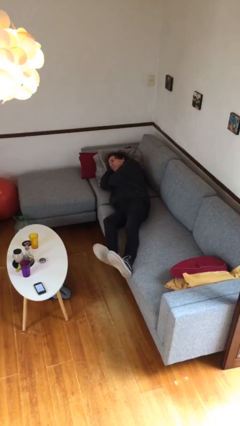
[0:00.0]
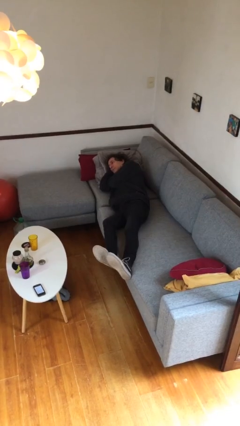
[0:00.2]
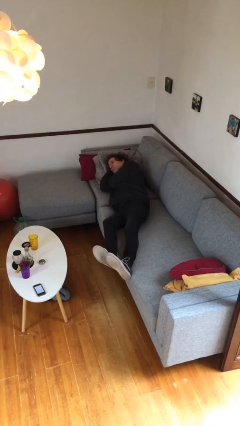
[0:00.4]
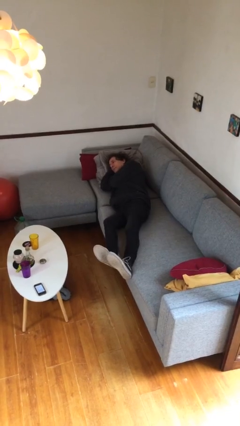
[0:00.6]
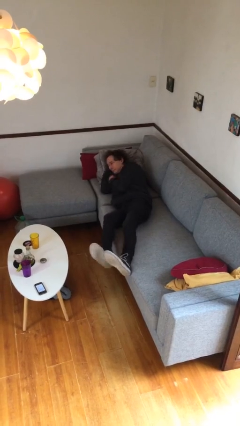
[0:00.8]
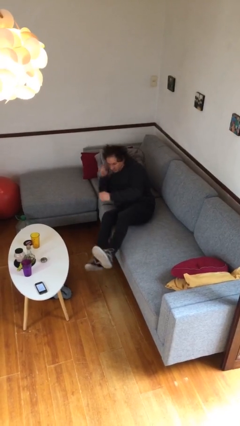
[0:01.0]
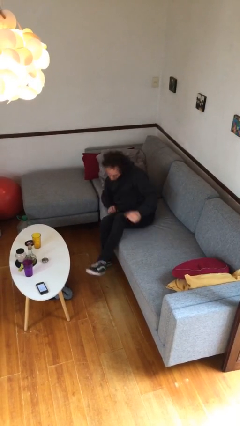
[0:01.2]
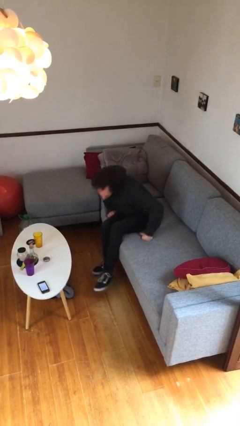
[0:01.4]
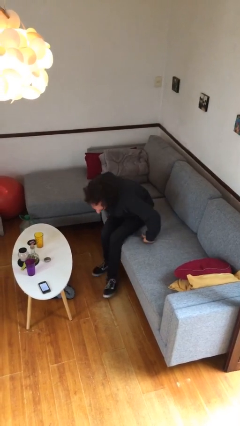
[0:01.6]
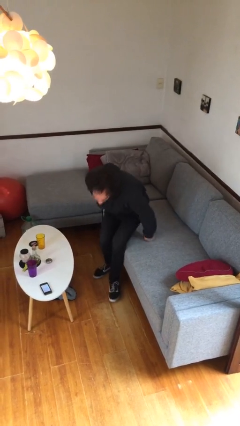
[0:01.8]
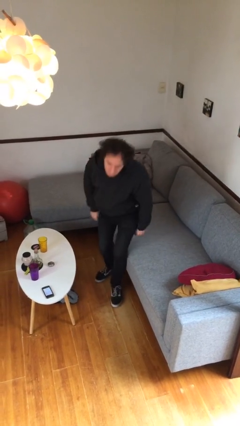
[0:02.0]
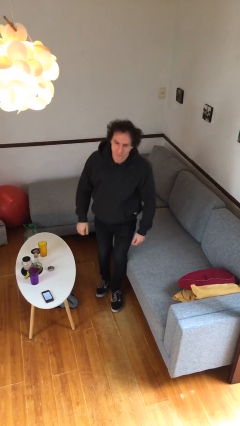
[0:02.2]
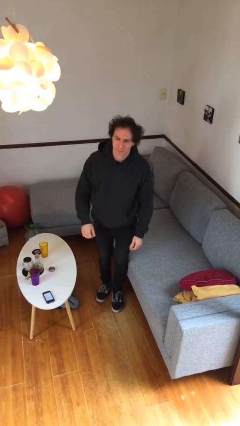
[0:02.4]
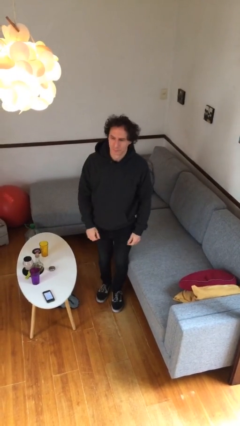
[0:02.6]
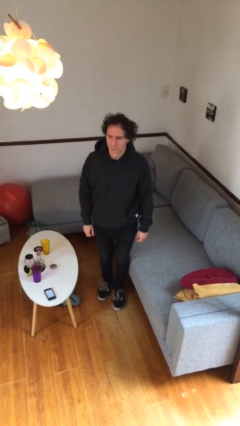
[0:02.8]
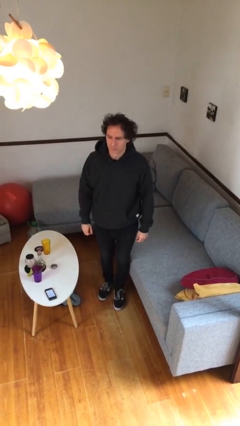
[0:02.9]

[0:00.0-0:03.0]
person stands up

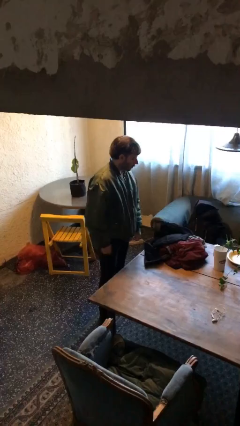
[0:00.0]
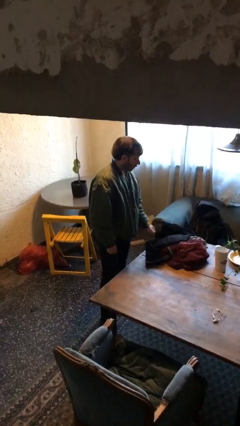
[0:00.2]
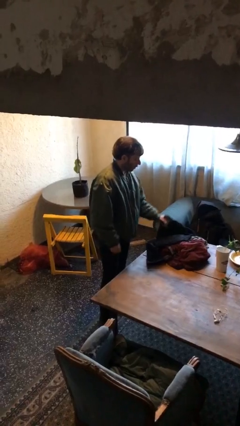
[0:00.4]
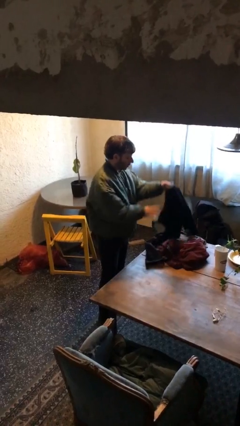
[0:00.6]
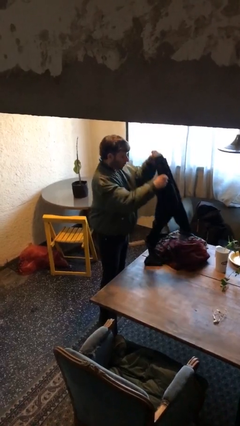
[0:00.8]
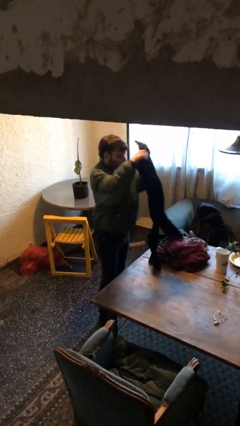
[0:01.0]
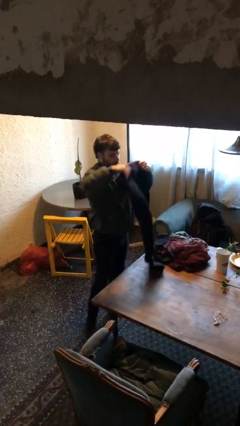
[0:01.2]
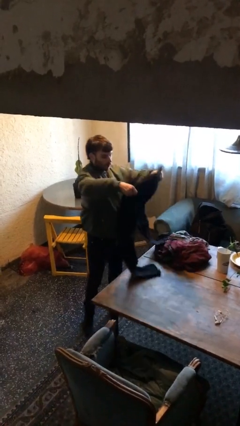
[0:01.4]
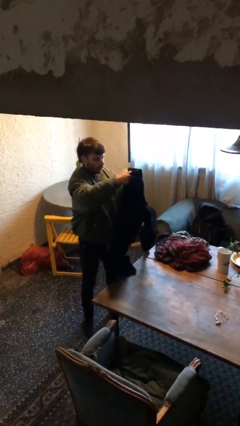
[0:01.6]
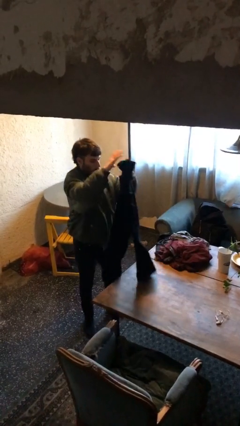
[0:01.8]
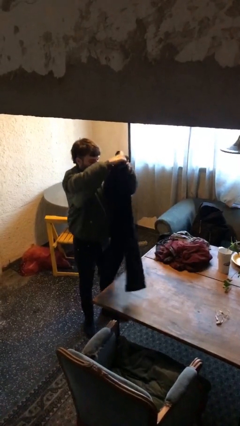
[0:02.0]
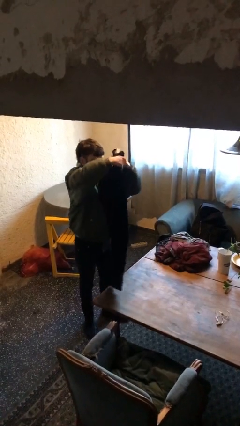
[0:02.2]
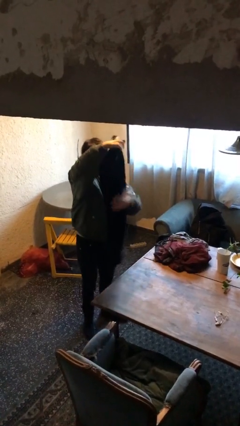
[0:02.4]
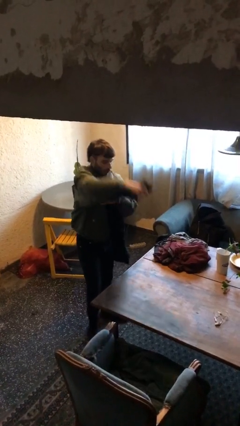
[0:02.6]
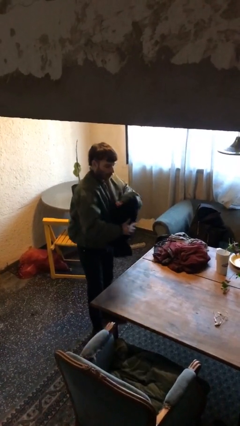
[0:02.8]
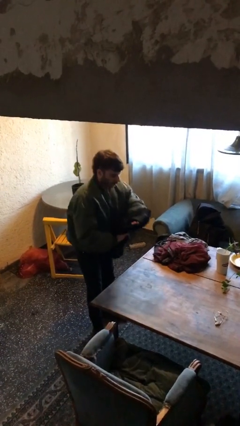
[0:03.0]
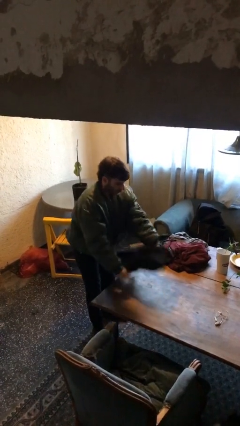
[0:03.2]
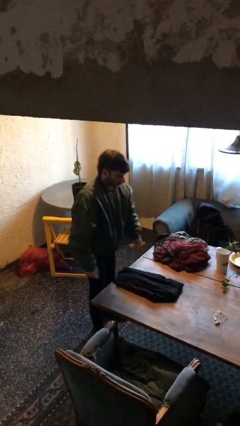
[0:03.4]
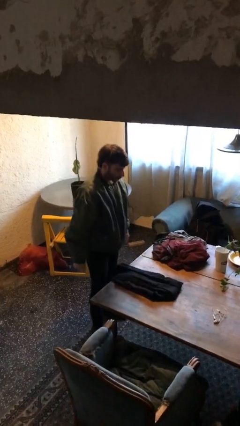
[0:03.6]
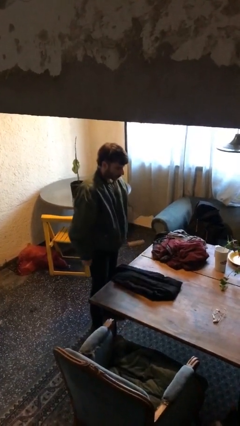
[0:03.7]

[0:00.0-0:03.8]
person folds pants

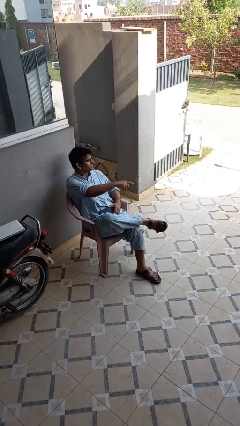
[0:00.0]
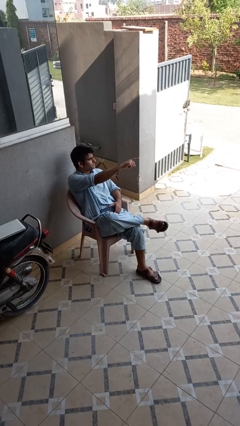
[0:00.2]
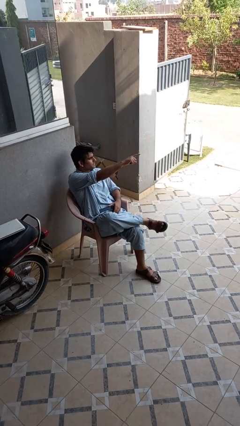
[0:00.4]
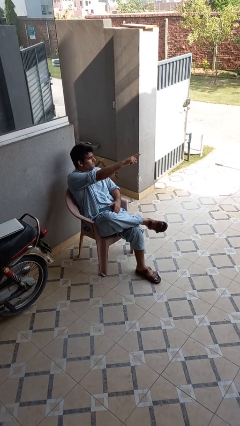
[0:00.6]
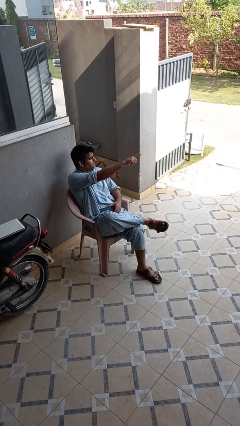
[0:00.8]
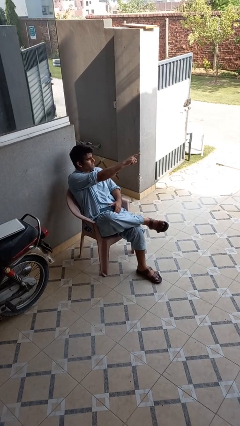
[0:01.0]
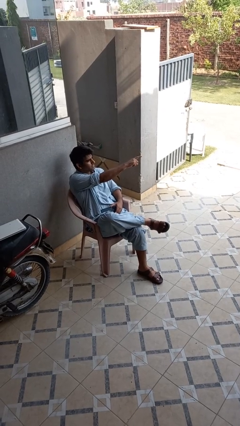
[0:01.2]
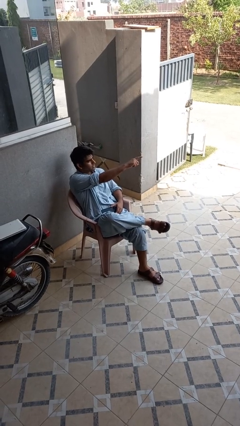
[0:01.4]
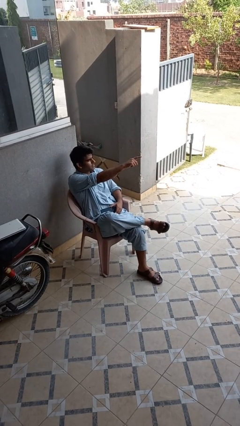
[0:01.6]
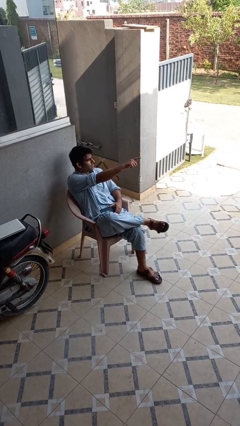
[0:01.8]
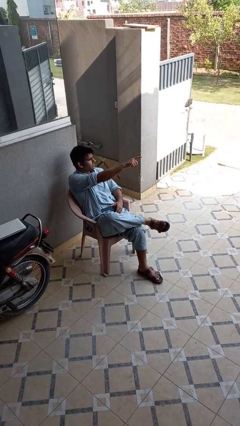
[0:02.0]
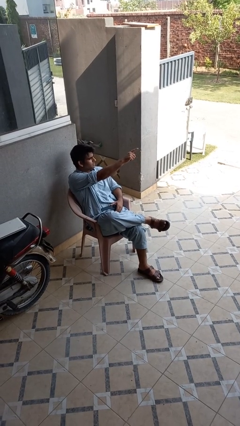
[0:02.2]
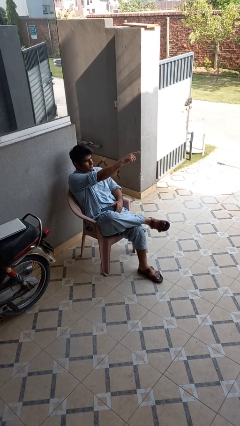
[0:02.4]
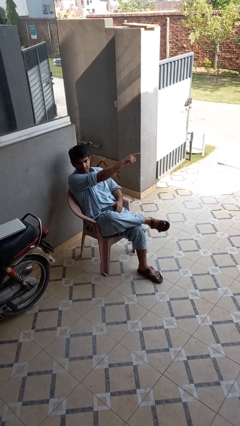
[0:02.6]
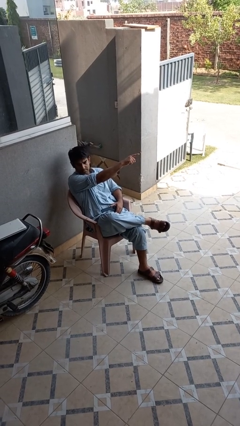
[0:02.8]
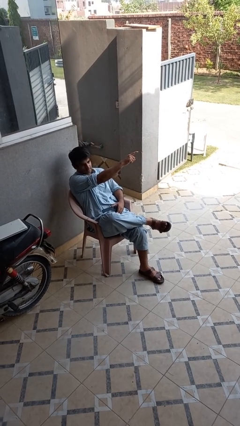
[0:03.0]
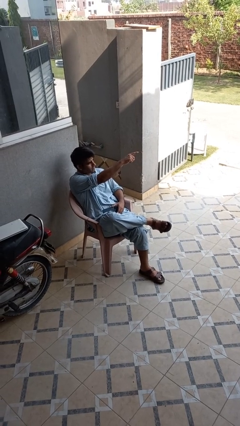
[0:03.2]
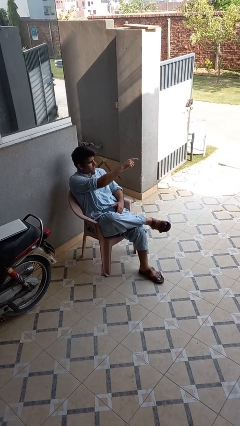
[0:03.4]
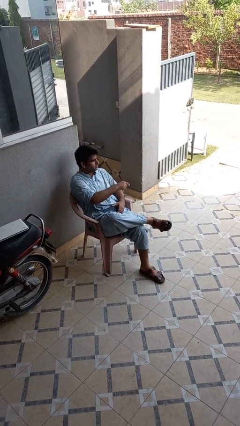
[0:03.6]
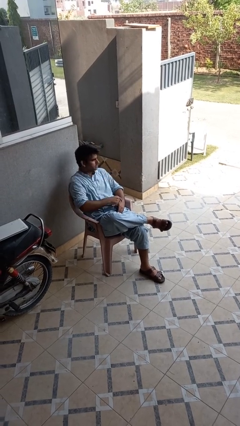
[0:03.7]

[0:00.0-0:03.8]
person points at person

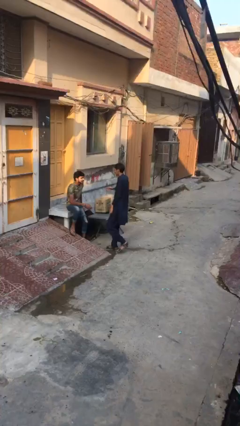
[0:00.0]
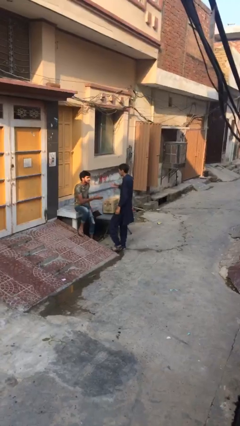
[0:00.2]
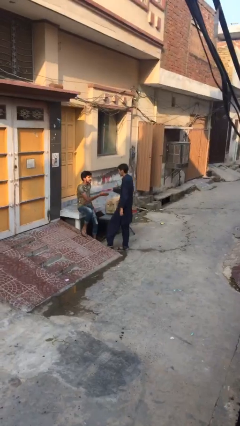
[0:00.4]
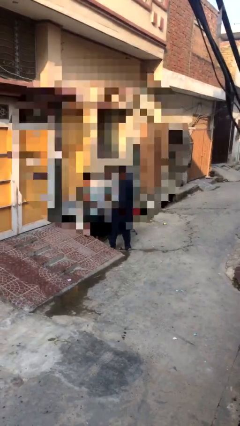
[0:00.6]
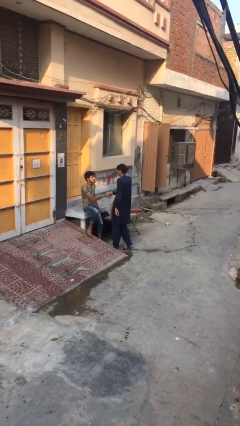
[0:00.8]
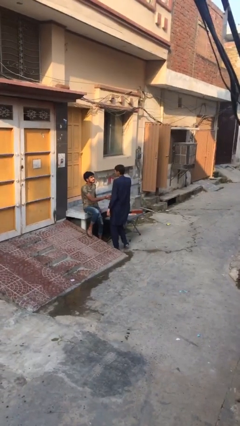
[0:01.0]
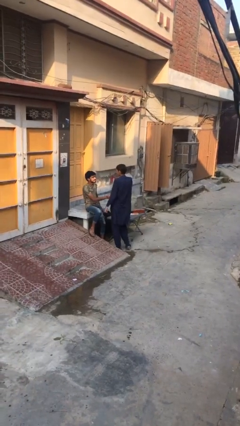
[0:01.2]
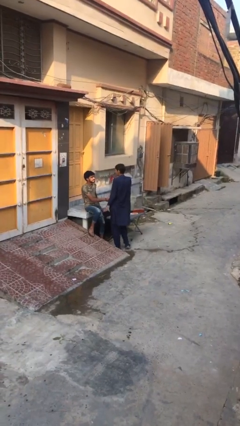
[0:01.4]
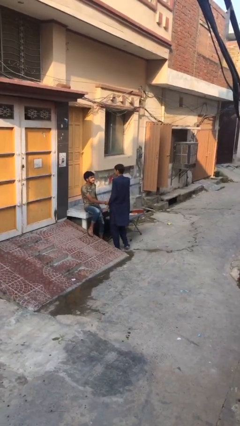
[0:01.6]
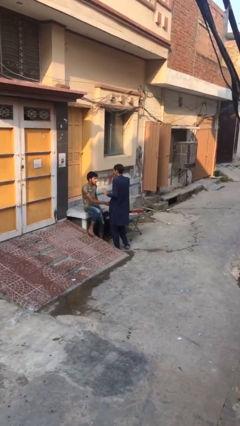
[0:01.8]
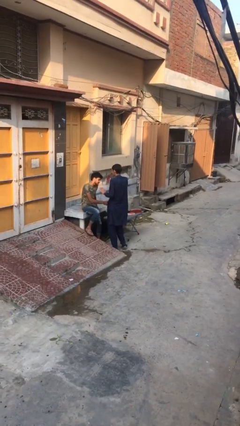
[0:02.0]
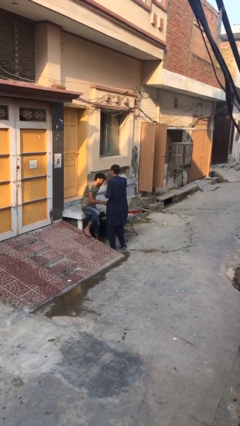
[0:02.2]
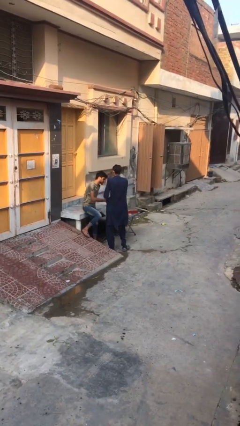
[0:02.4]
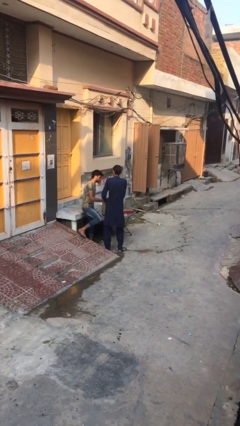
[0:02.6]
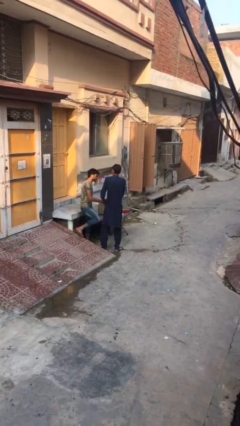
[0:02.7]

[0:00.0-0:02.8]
person shakes hand

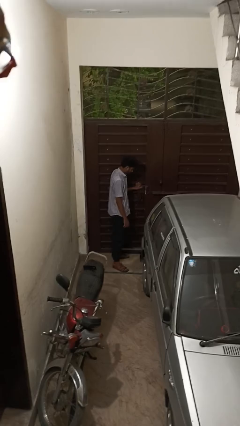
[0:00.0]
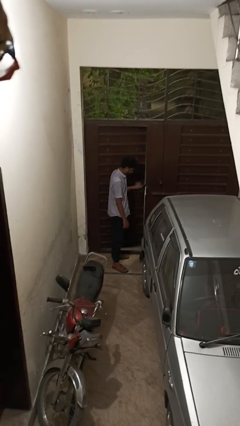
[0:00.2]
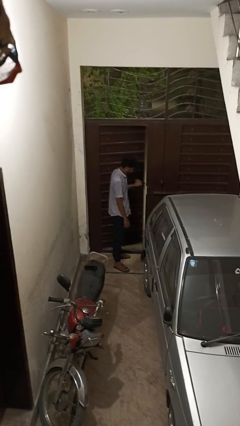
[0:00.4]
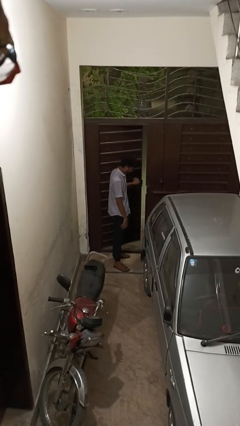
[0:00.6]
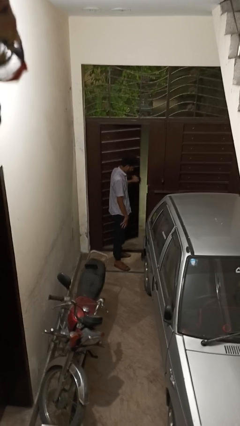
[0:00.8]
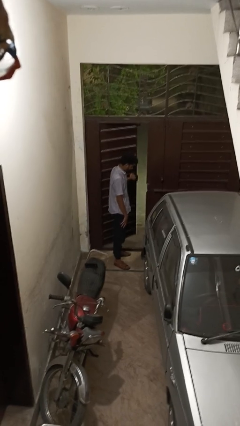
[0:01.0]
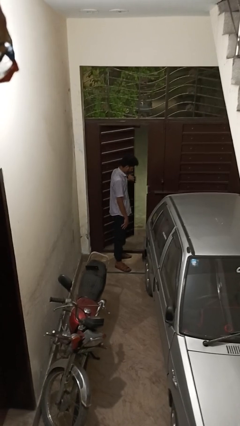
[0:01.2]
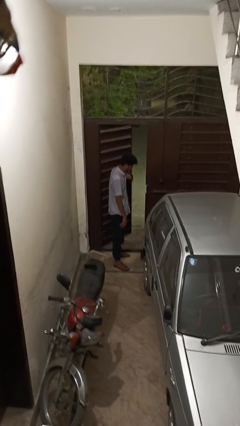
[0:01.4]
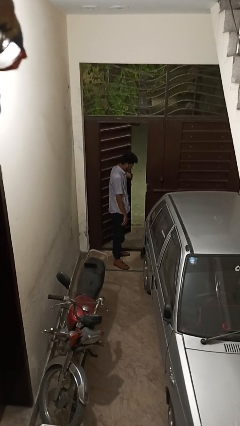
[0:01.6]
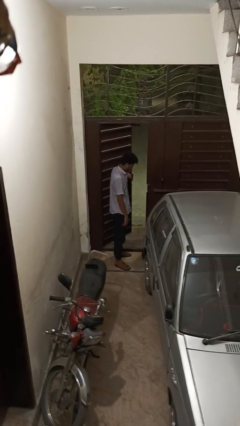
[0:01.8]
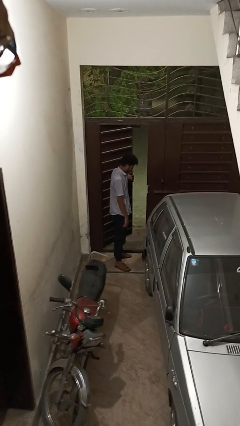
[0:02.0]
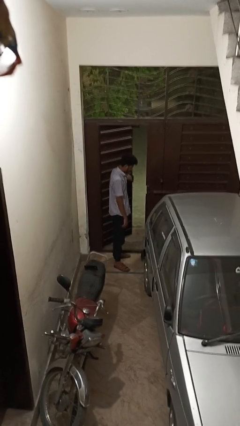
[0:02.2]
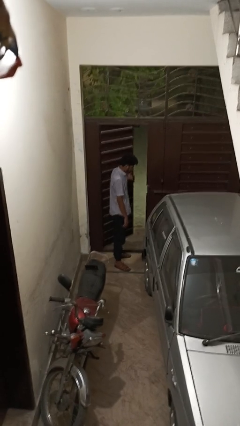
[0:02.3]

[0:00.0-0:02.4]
person opens gate

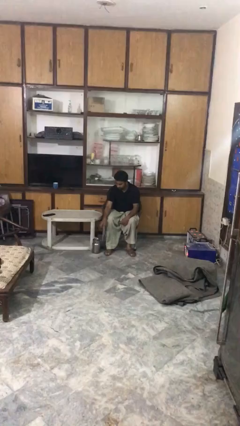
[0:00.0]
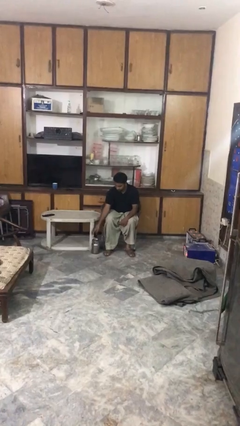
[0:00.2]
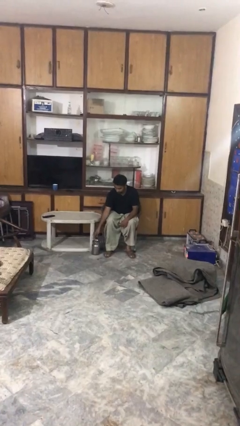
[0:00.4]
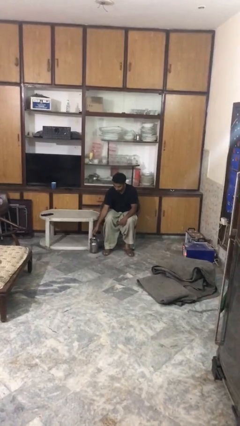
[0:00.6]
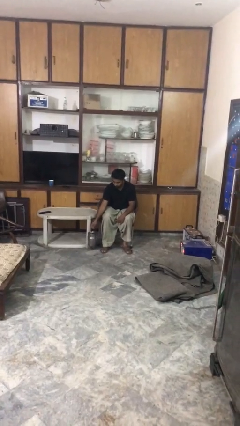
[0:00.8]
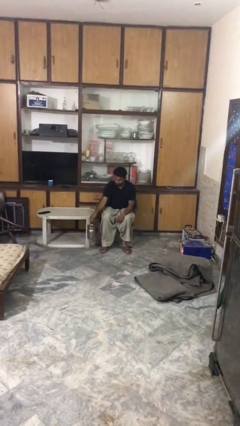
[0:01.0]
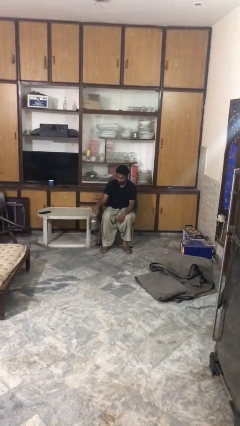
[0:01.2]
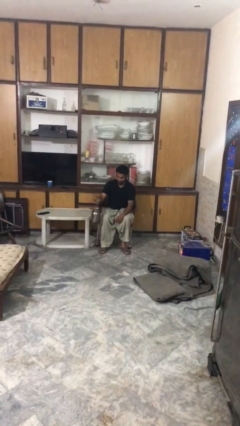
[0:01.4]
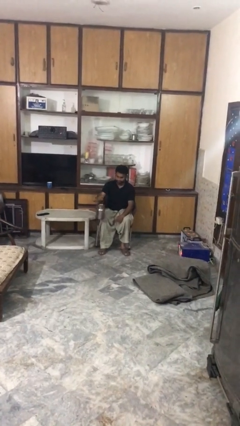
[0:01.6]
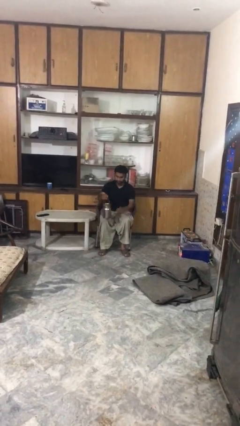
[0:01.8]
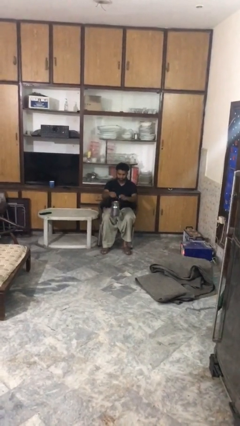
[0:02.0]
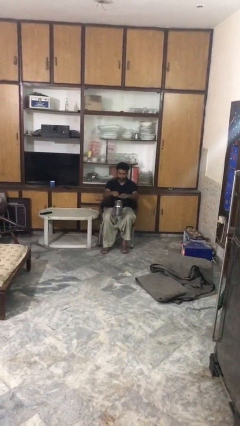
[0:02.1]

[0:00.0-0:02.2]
person picks up object from floor
